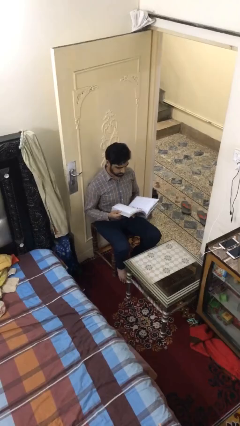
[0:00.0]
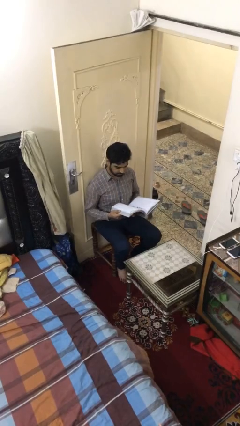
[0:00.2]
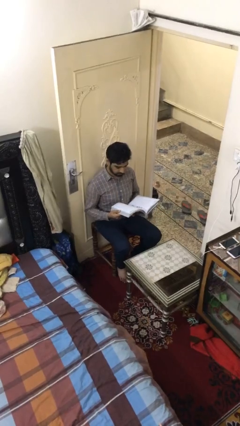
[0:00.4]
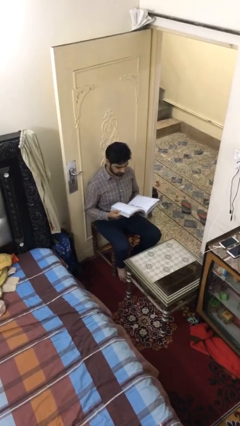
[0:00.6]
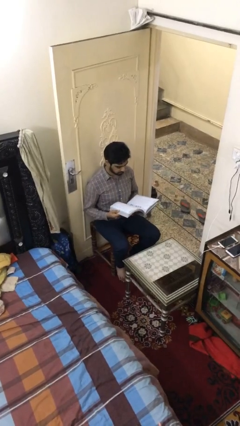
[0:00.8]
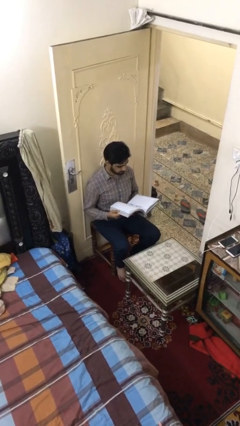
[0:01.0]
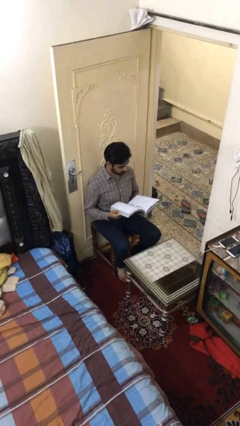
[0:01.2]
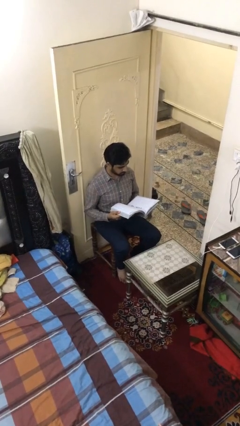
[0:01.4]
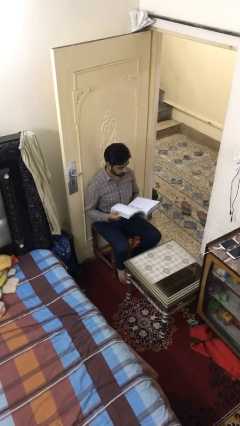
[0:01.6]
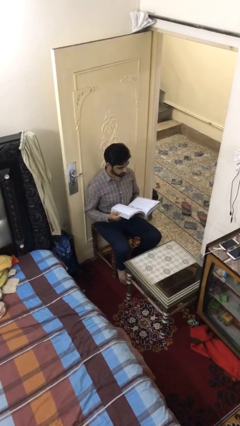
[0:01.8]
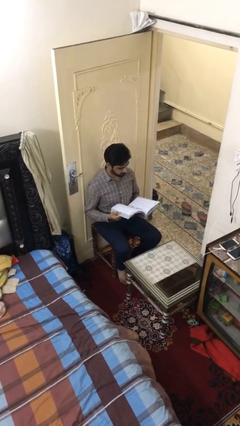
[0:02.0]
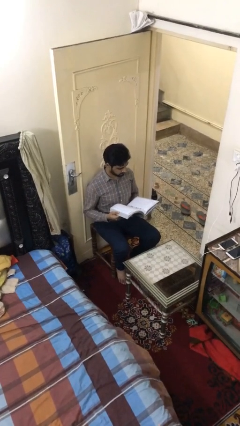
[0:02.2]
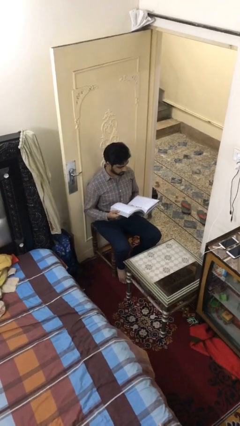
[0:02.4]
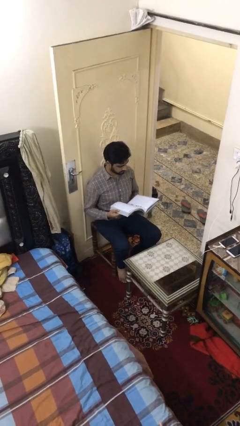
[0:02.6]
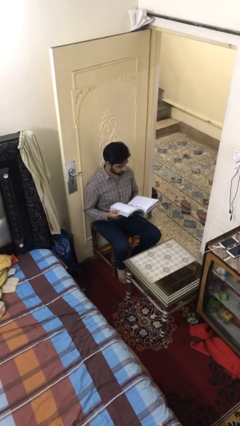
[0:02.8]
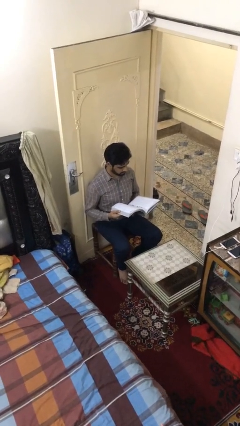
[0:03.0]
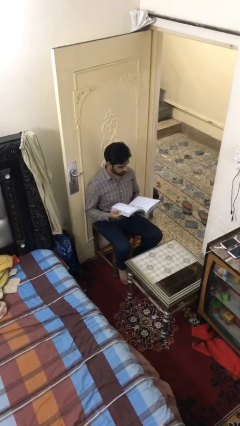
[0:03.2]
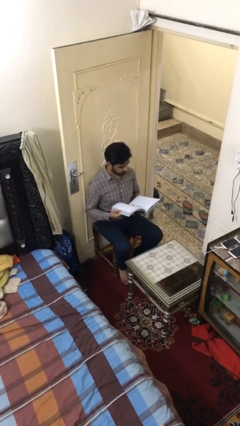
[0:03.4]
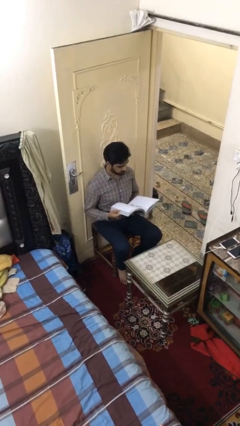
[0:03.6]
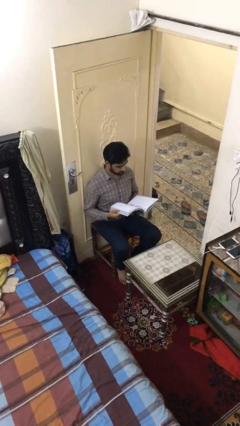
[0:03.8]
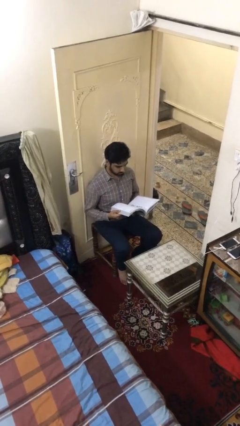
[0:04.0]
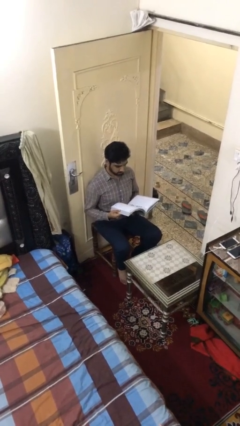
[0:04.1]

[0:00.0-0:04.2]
person reads document

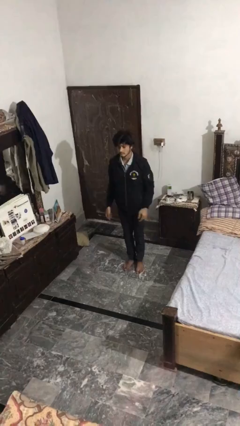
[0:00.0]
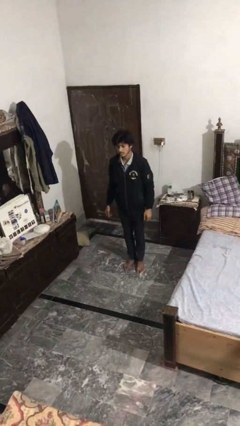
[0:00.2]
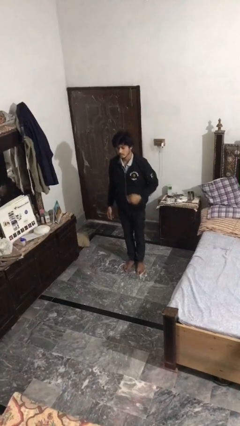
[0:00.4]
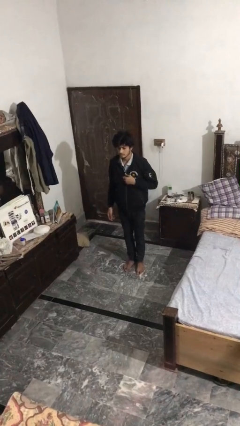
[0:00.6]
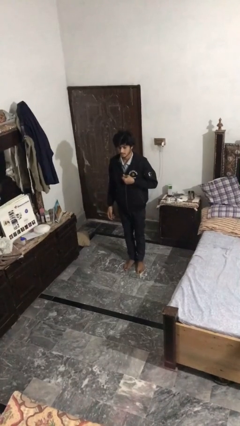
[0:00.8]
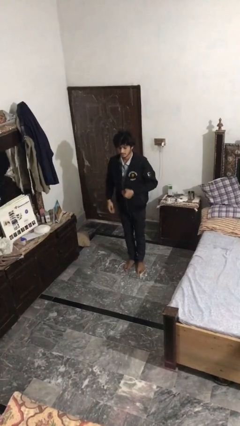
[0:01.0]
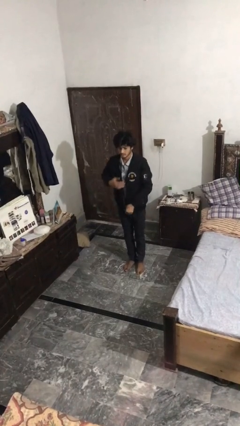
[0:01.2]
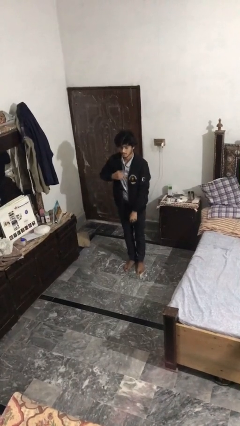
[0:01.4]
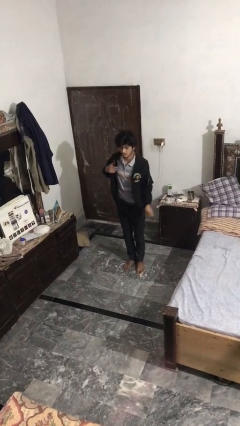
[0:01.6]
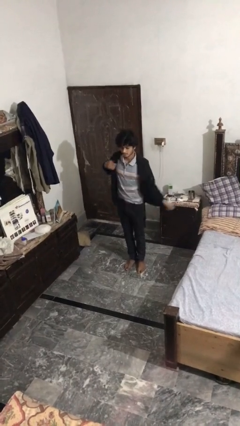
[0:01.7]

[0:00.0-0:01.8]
person unzips jacket

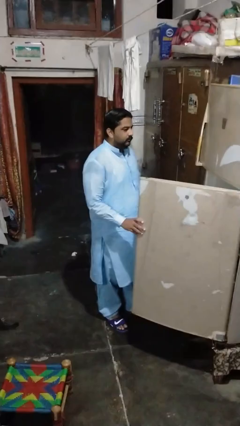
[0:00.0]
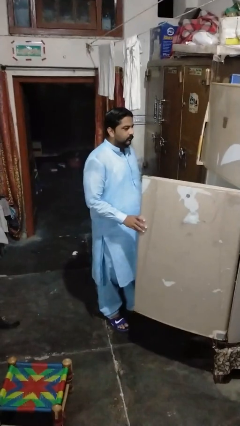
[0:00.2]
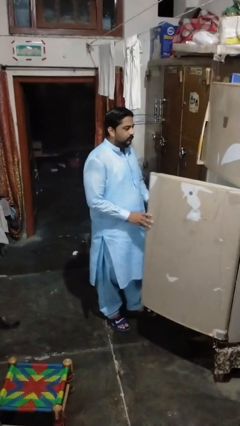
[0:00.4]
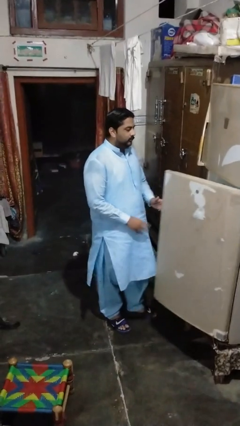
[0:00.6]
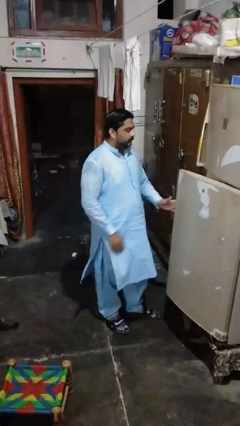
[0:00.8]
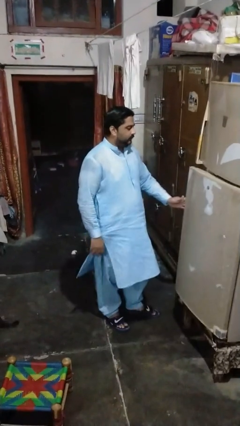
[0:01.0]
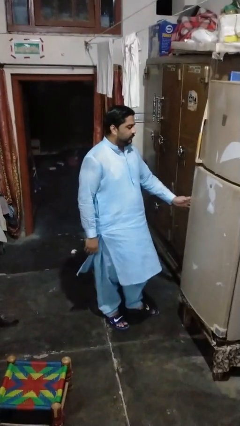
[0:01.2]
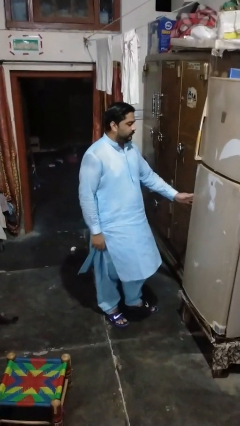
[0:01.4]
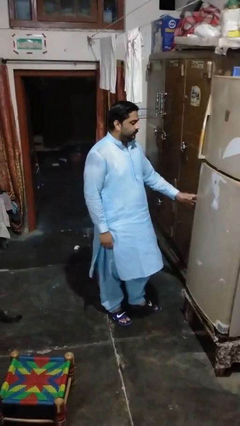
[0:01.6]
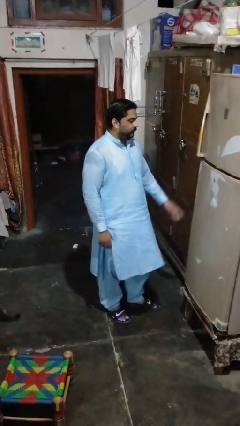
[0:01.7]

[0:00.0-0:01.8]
person closes refrigerator

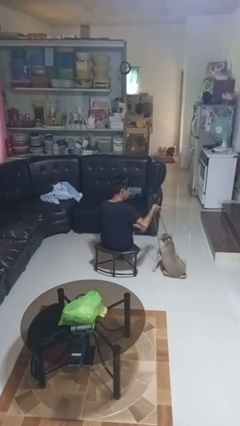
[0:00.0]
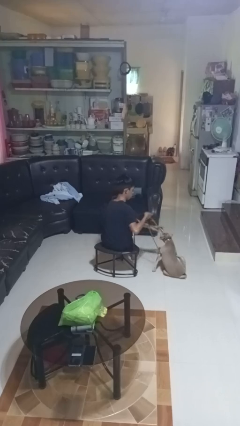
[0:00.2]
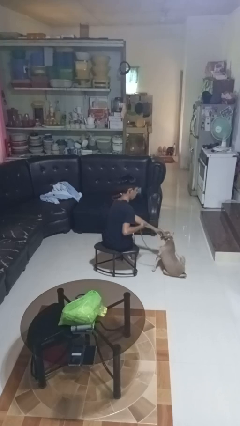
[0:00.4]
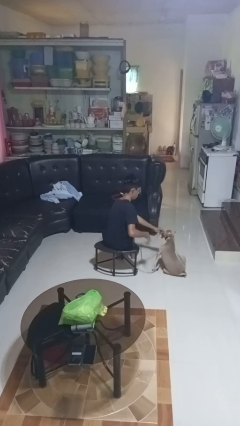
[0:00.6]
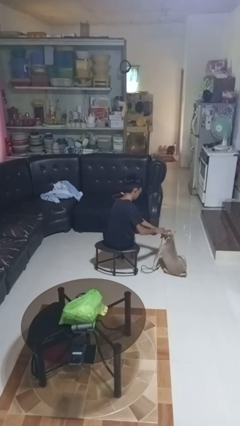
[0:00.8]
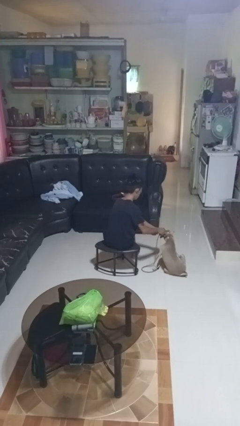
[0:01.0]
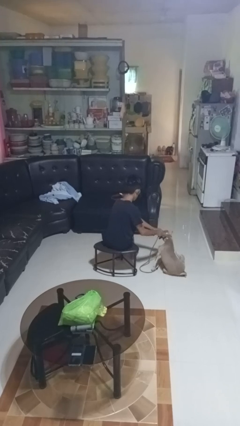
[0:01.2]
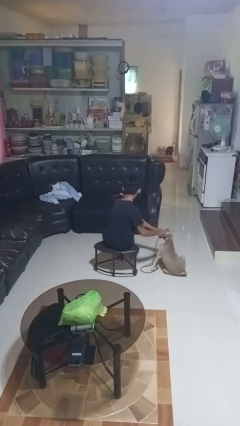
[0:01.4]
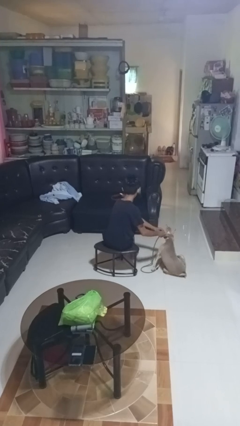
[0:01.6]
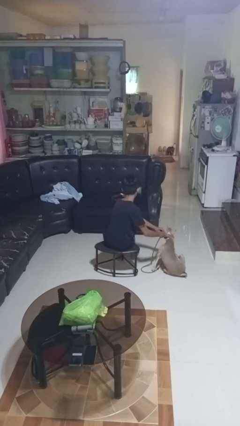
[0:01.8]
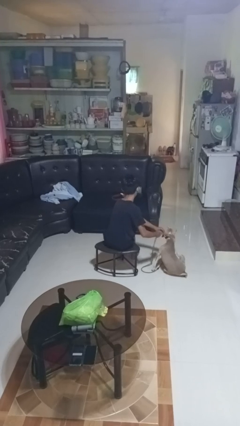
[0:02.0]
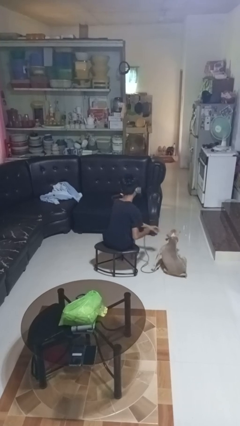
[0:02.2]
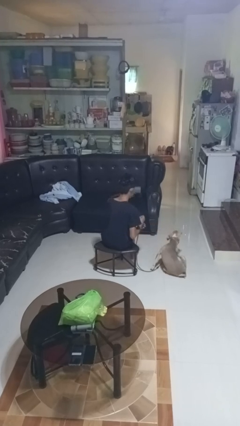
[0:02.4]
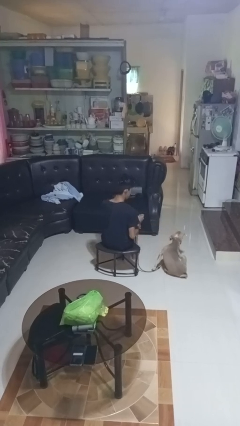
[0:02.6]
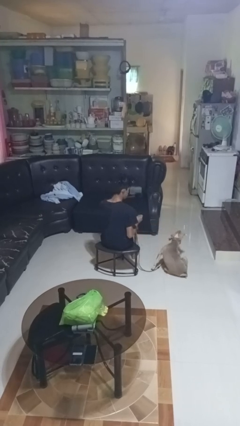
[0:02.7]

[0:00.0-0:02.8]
person unattaches leash from dog

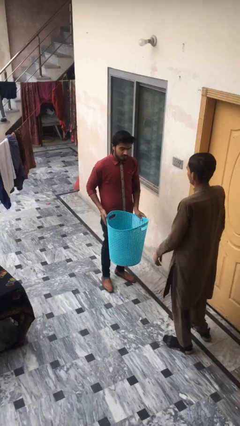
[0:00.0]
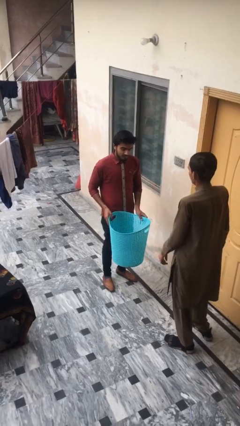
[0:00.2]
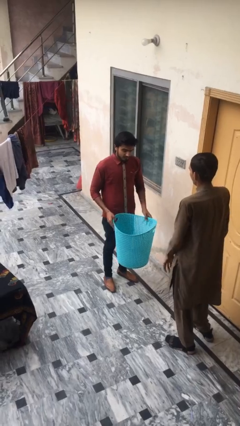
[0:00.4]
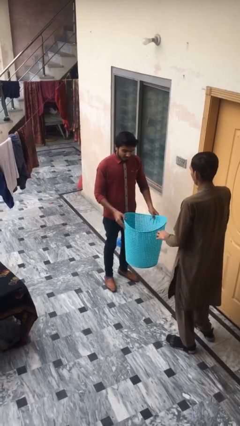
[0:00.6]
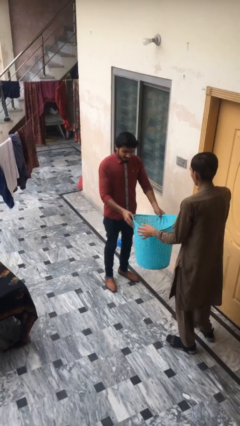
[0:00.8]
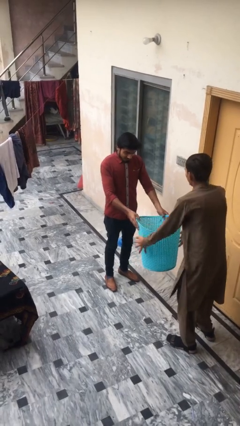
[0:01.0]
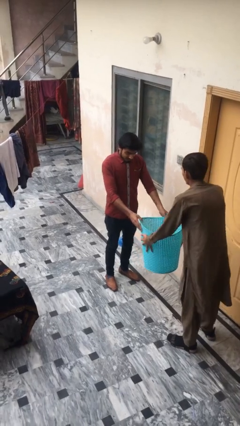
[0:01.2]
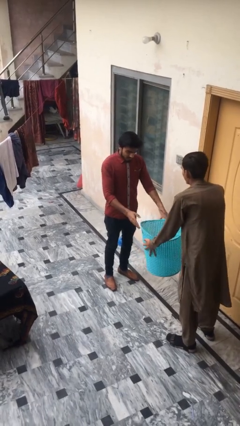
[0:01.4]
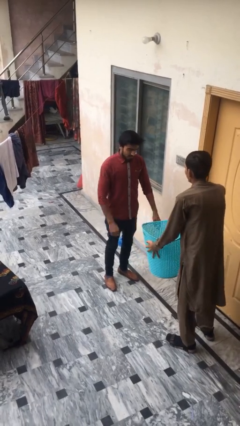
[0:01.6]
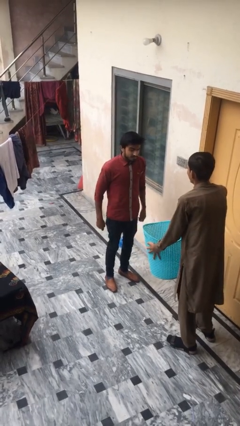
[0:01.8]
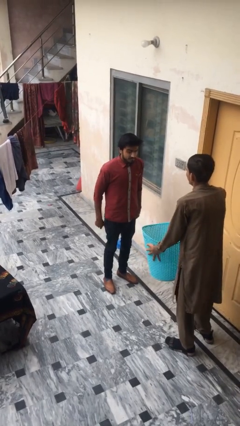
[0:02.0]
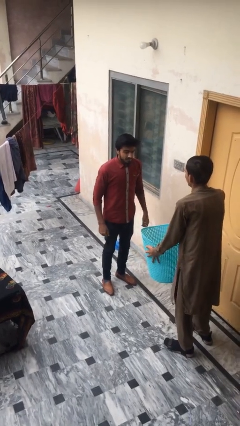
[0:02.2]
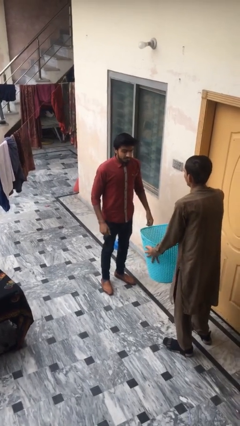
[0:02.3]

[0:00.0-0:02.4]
person transfers object to person

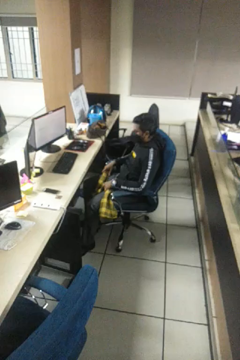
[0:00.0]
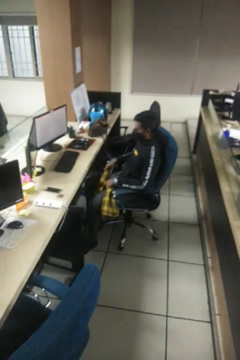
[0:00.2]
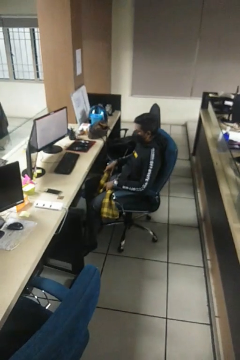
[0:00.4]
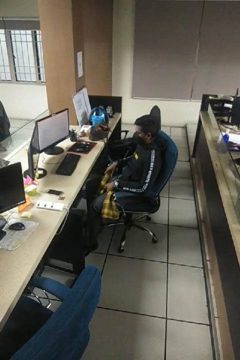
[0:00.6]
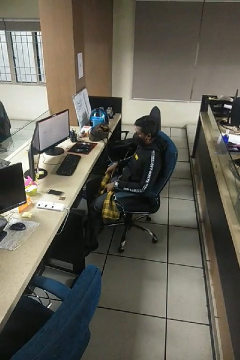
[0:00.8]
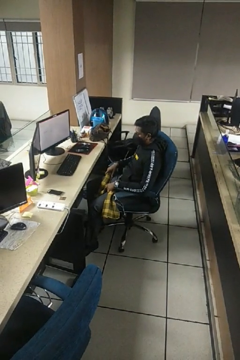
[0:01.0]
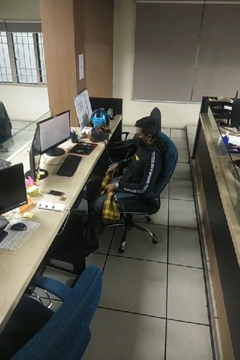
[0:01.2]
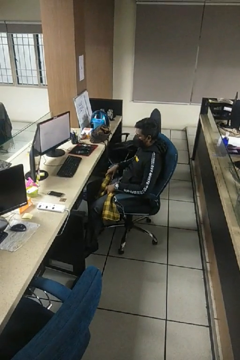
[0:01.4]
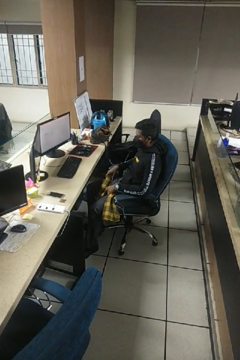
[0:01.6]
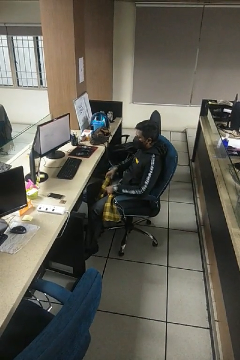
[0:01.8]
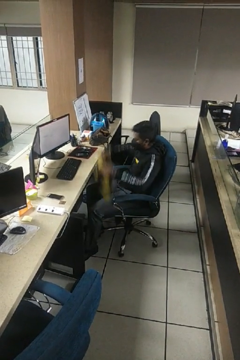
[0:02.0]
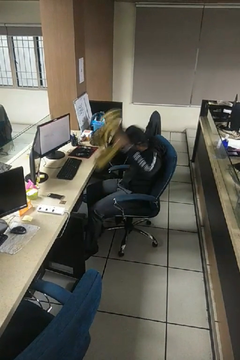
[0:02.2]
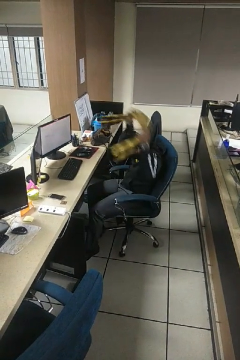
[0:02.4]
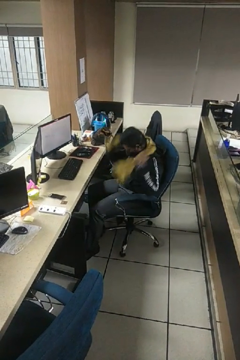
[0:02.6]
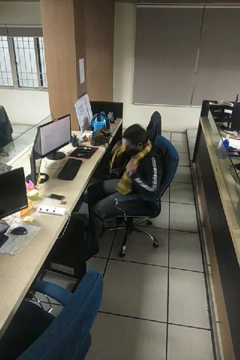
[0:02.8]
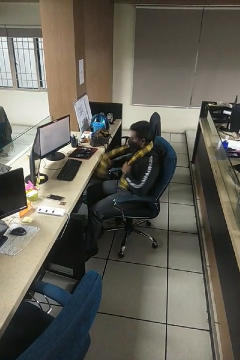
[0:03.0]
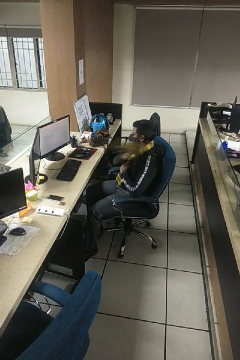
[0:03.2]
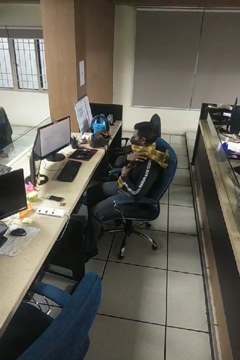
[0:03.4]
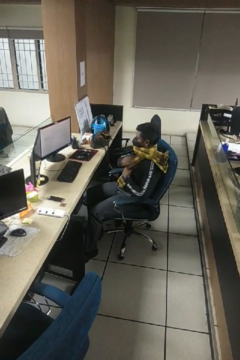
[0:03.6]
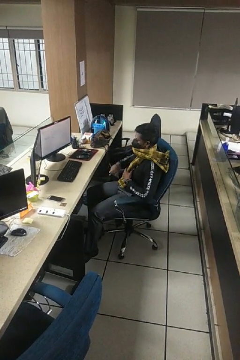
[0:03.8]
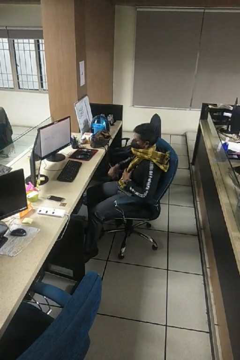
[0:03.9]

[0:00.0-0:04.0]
person puts on scarf

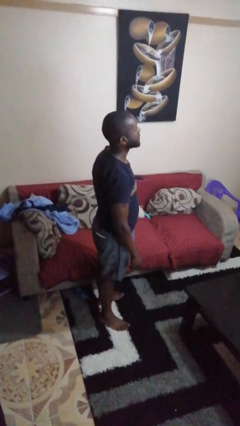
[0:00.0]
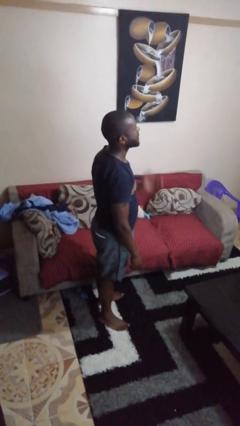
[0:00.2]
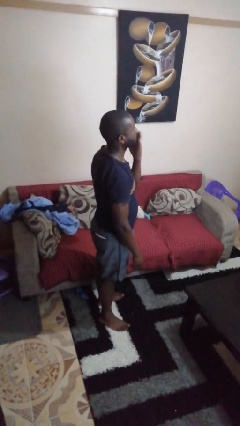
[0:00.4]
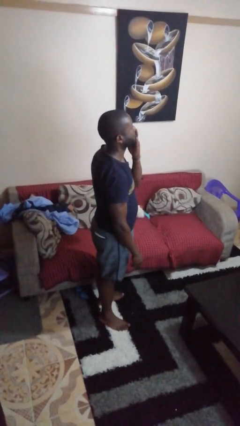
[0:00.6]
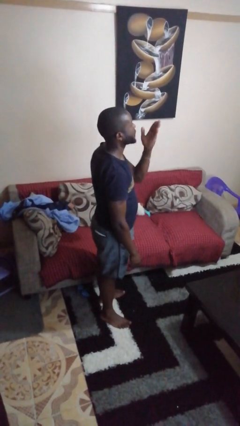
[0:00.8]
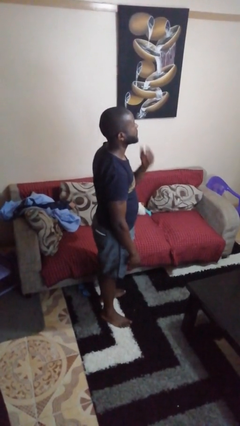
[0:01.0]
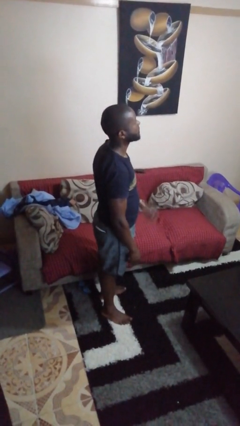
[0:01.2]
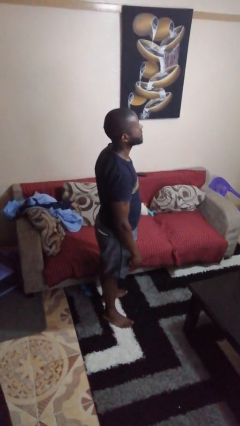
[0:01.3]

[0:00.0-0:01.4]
person gestures blow kiss
